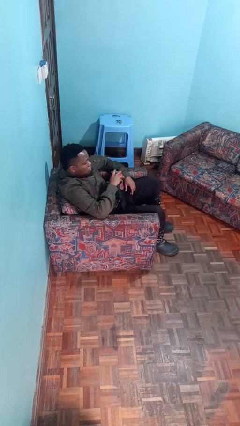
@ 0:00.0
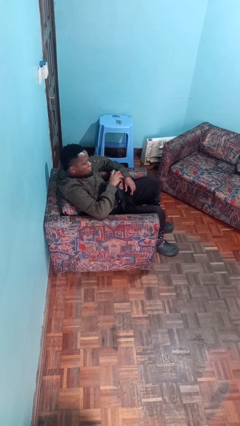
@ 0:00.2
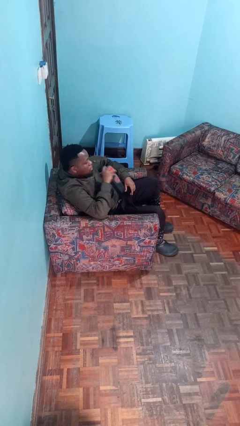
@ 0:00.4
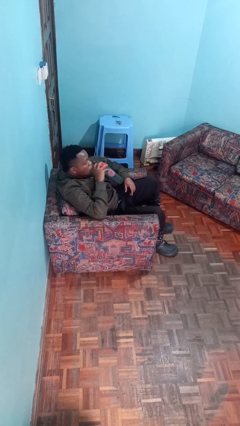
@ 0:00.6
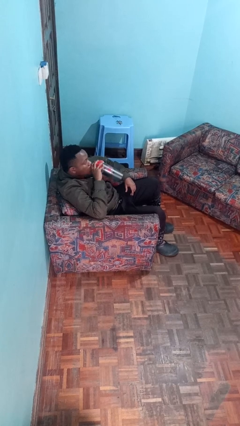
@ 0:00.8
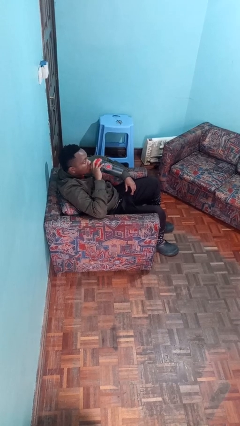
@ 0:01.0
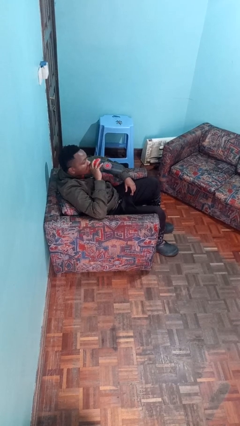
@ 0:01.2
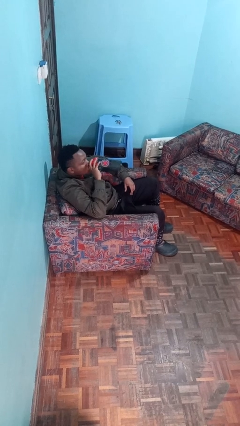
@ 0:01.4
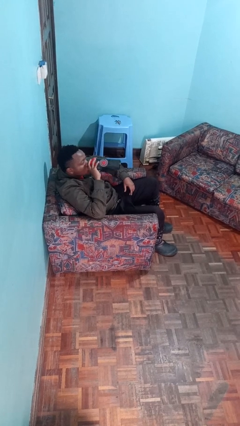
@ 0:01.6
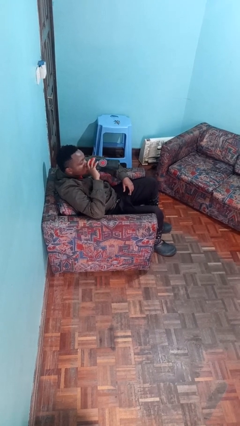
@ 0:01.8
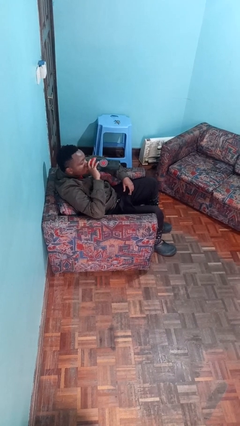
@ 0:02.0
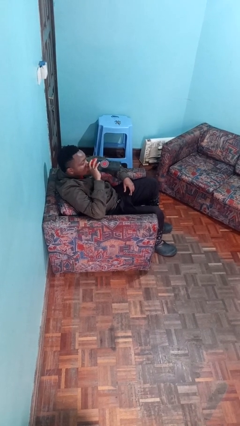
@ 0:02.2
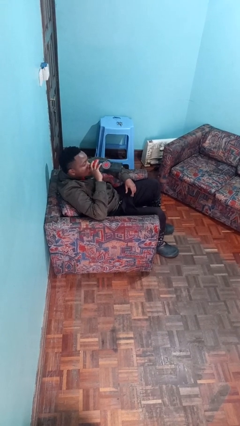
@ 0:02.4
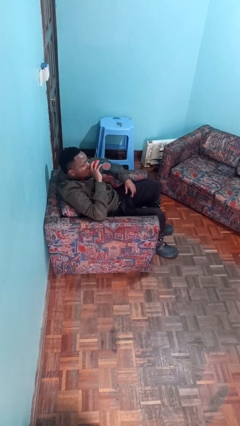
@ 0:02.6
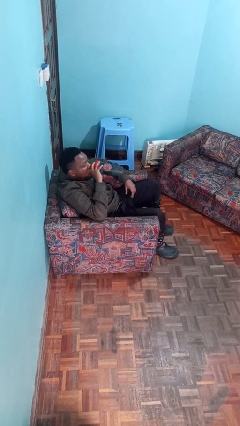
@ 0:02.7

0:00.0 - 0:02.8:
person drinks from bottle

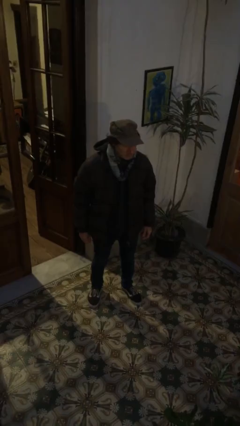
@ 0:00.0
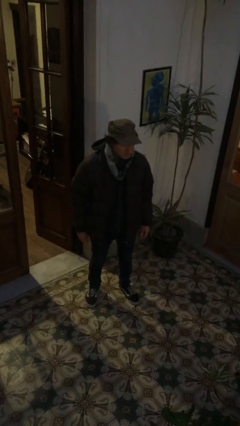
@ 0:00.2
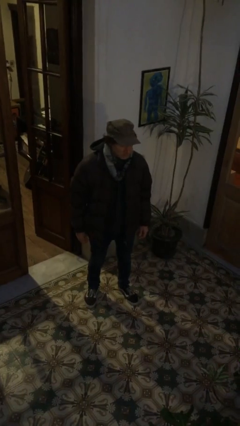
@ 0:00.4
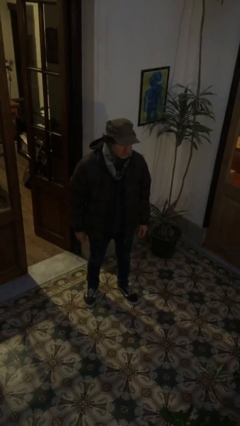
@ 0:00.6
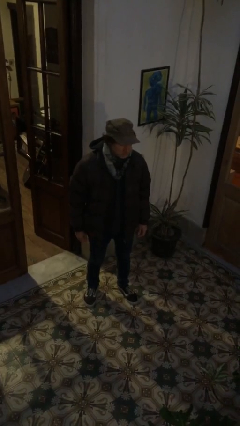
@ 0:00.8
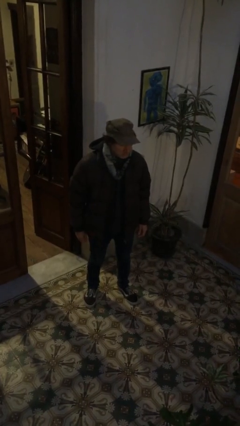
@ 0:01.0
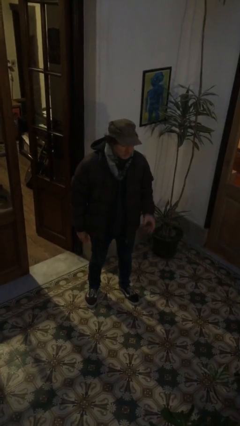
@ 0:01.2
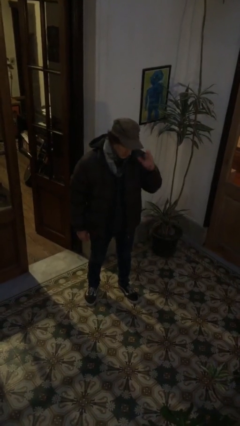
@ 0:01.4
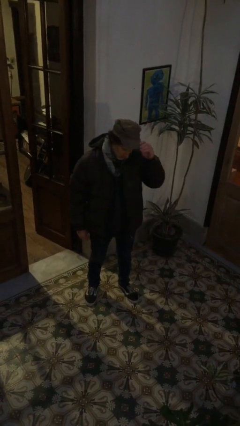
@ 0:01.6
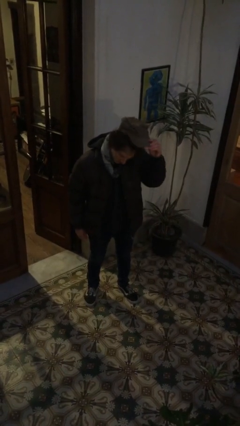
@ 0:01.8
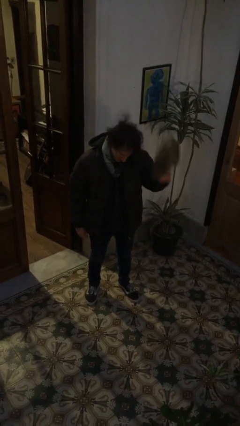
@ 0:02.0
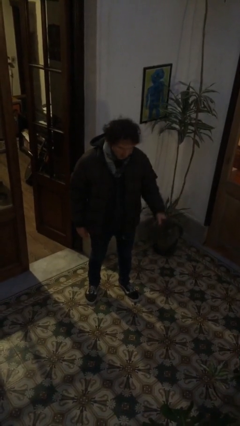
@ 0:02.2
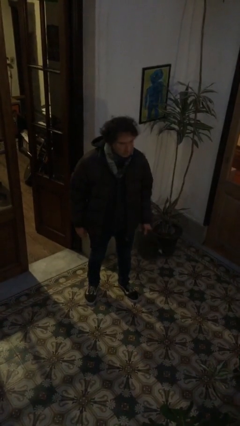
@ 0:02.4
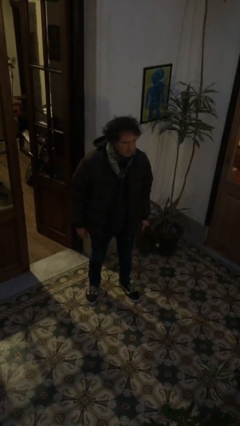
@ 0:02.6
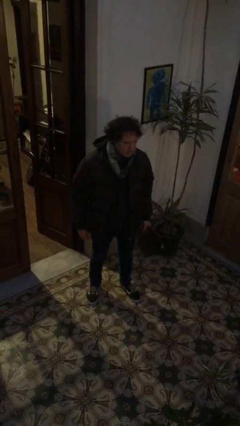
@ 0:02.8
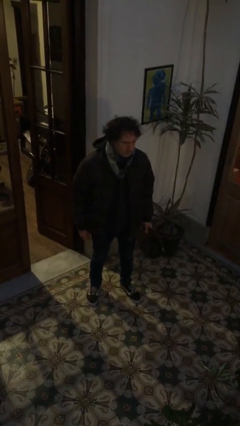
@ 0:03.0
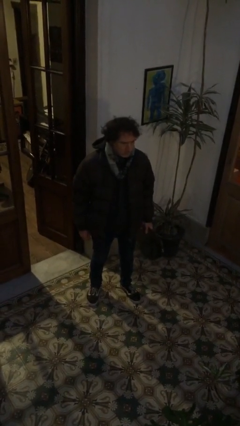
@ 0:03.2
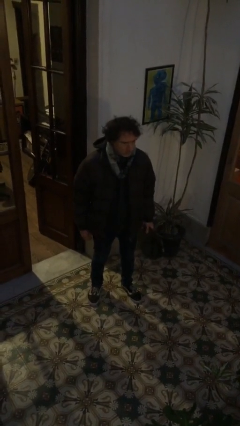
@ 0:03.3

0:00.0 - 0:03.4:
person takes off hat

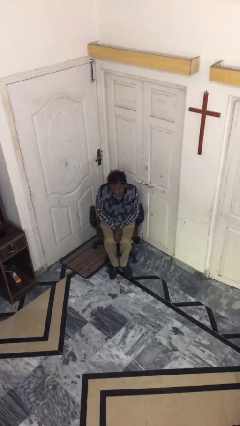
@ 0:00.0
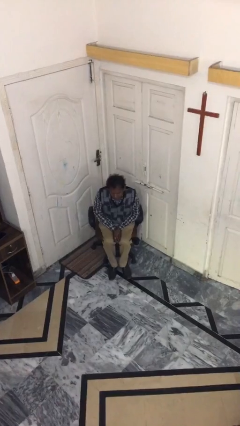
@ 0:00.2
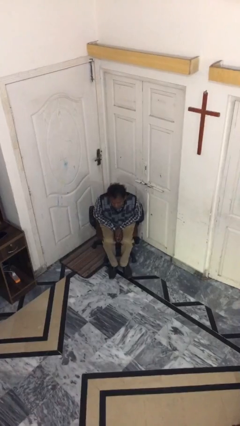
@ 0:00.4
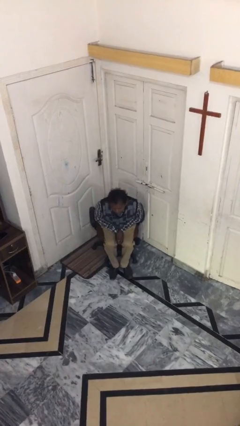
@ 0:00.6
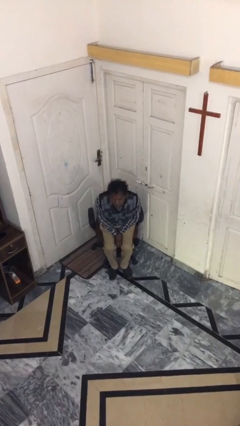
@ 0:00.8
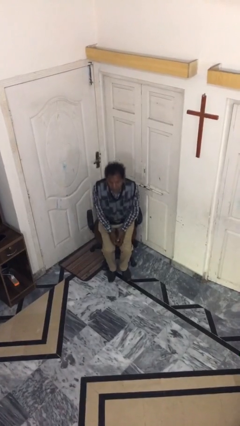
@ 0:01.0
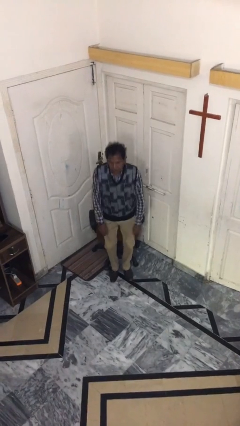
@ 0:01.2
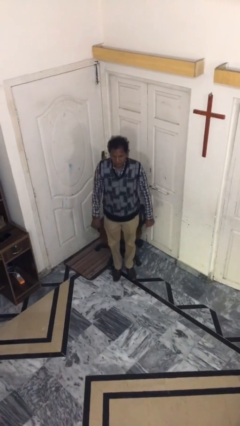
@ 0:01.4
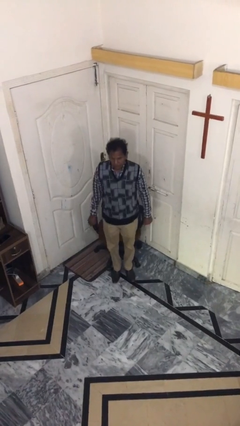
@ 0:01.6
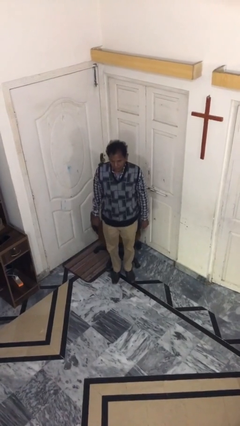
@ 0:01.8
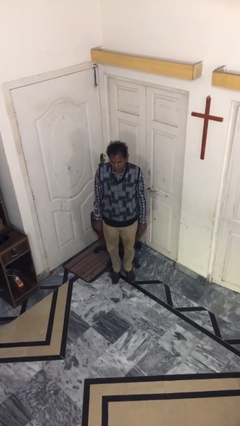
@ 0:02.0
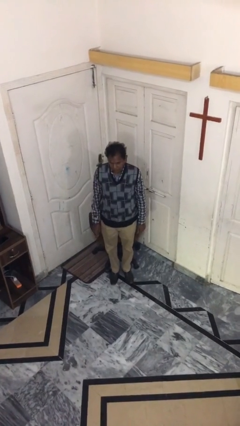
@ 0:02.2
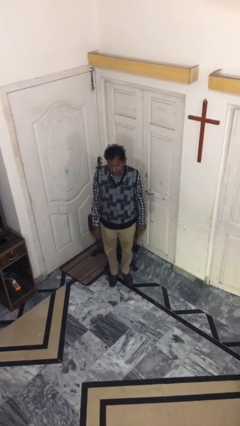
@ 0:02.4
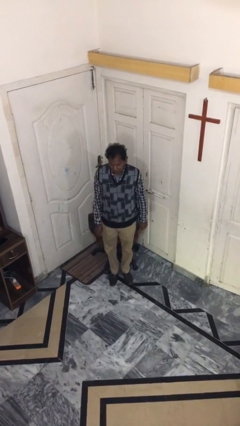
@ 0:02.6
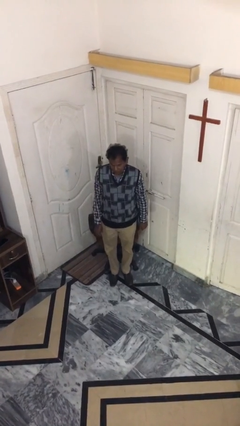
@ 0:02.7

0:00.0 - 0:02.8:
person stands up

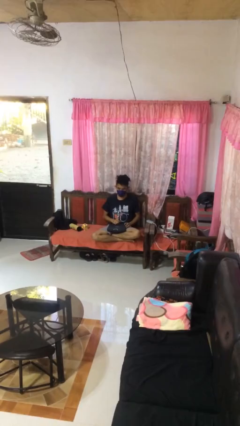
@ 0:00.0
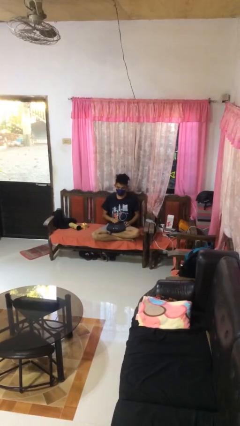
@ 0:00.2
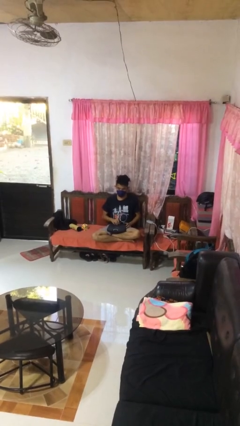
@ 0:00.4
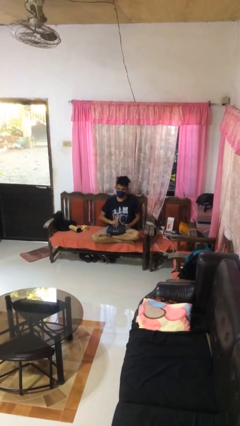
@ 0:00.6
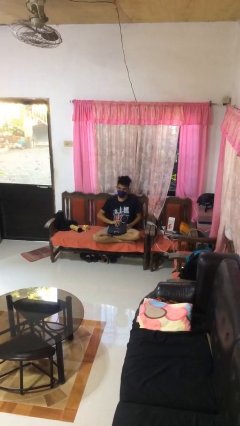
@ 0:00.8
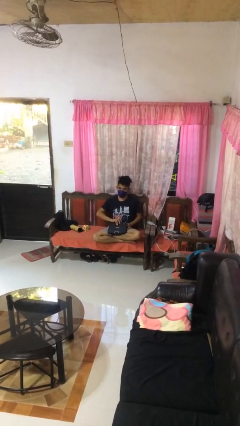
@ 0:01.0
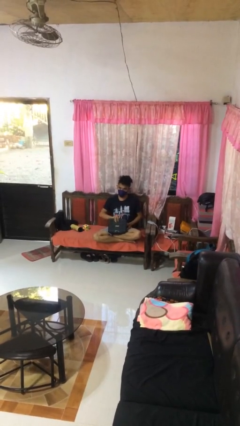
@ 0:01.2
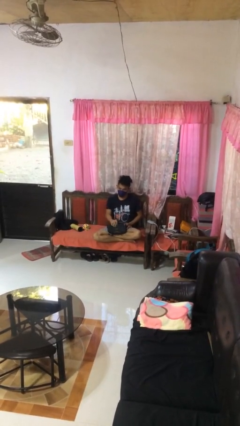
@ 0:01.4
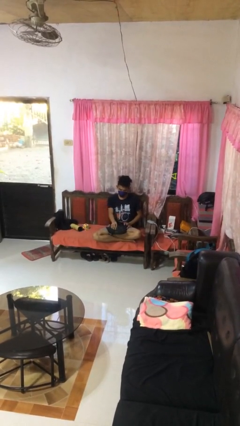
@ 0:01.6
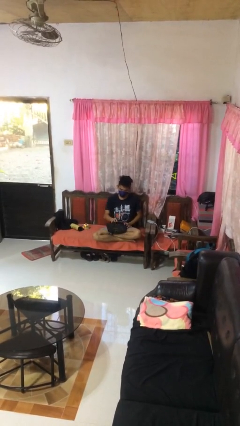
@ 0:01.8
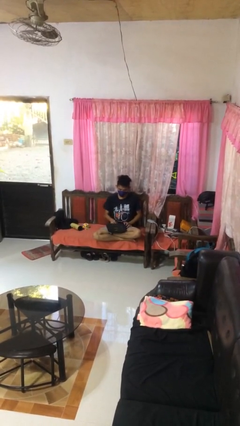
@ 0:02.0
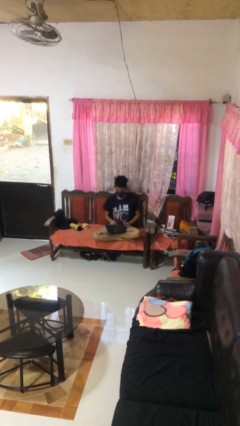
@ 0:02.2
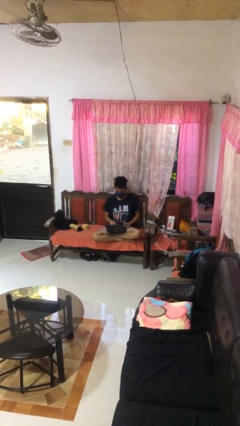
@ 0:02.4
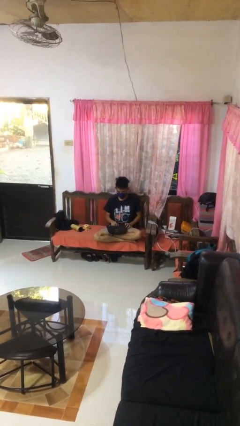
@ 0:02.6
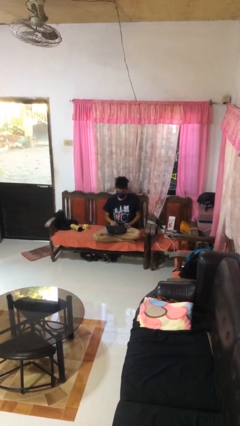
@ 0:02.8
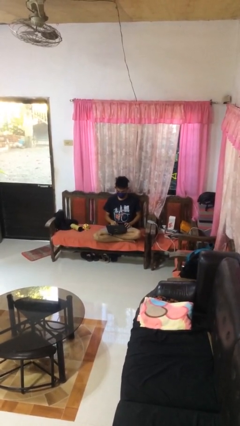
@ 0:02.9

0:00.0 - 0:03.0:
person opens laptop

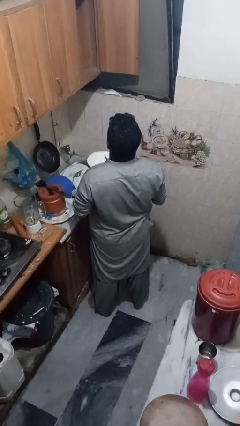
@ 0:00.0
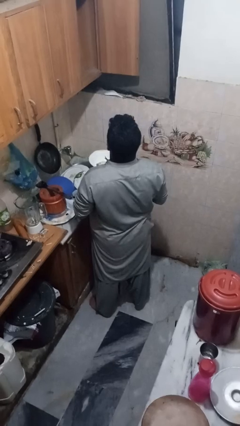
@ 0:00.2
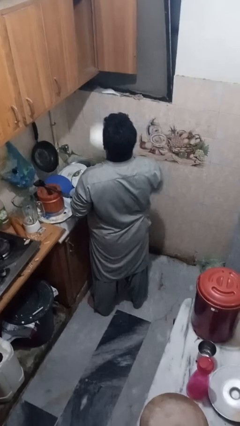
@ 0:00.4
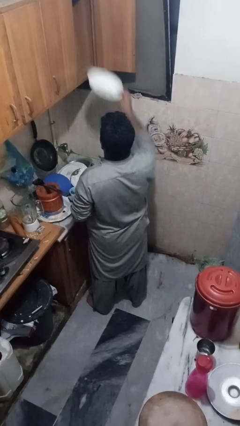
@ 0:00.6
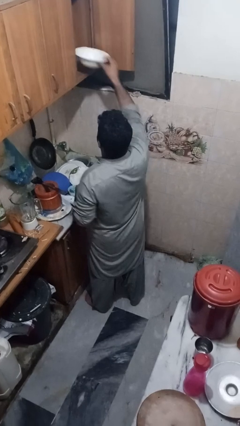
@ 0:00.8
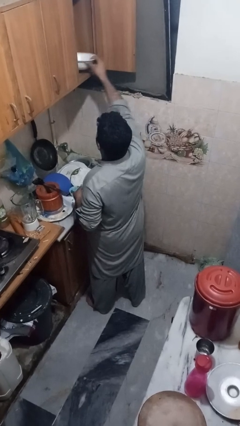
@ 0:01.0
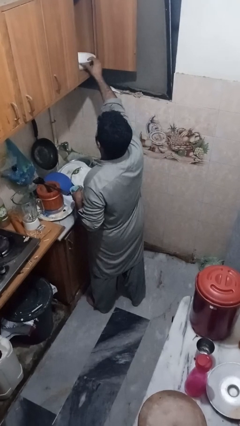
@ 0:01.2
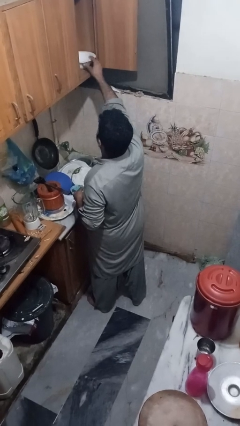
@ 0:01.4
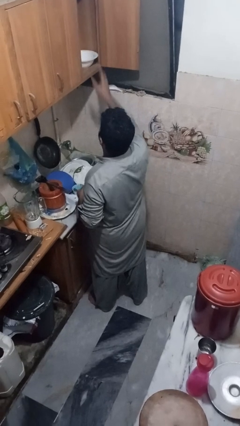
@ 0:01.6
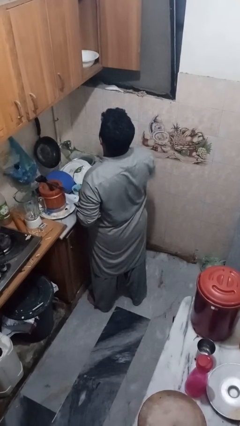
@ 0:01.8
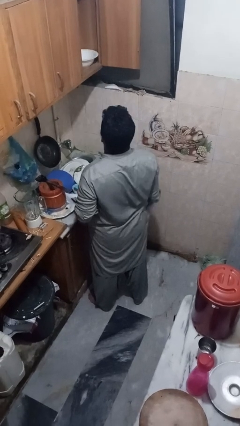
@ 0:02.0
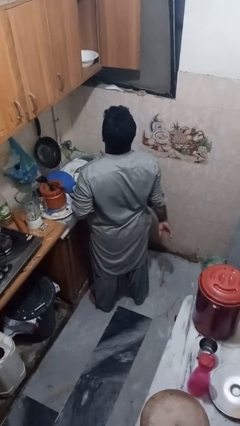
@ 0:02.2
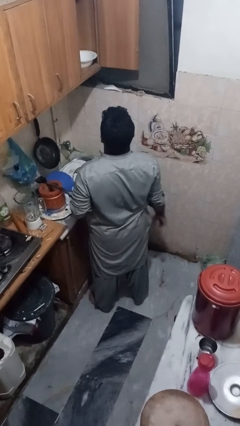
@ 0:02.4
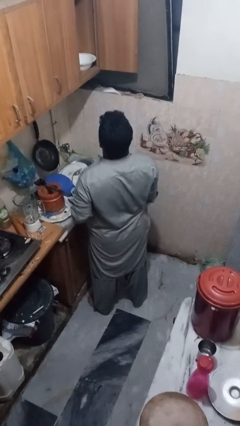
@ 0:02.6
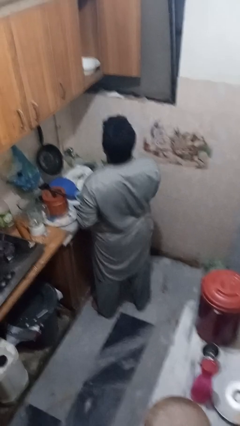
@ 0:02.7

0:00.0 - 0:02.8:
person puts object in cabinet

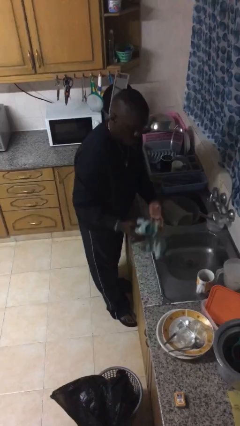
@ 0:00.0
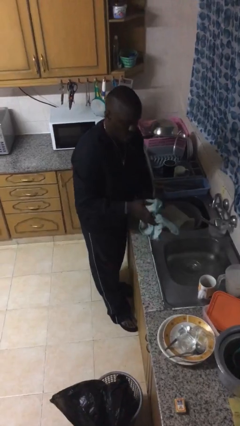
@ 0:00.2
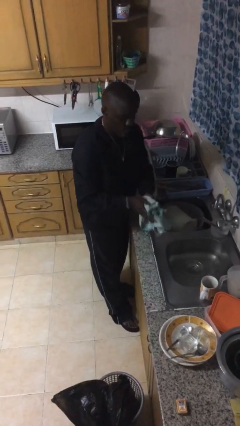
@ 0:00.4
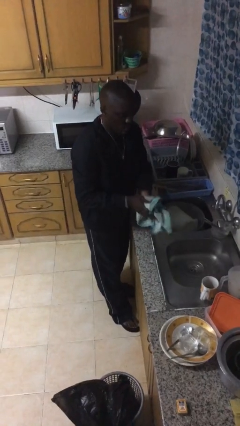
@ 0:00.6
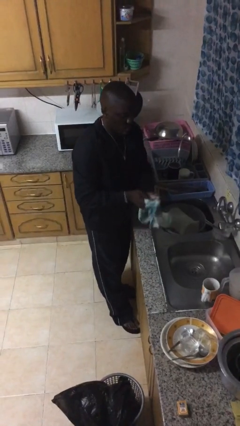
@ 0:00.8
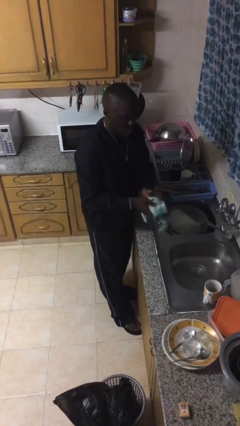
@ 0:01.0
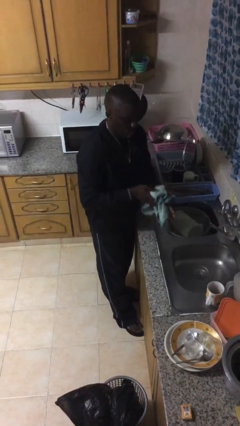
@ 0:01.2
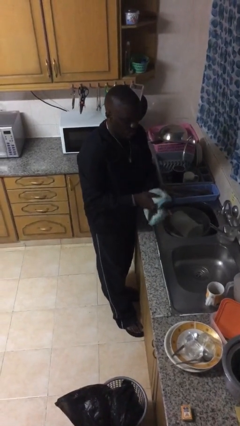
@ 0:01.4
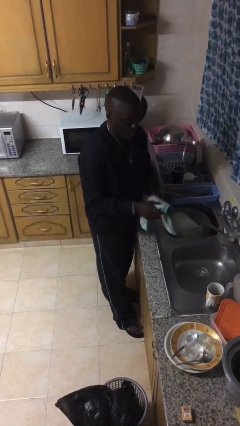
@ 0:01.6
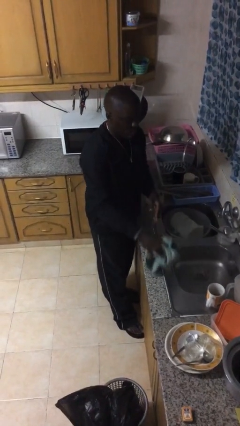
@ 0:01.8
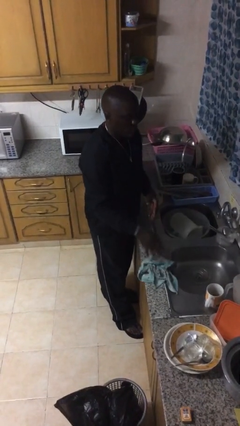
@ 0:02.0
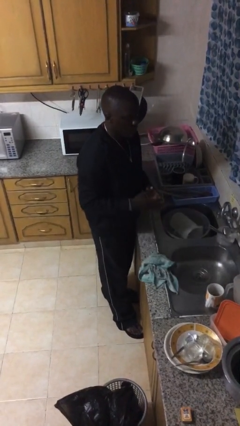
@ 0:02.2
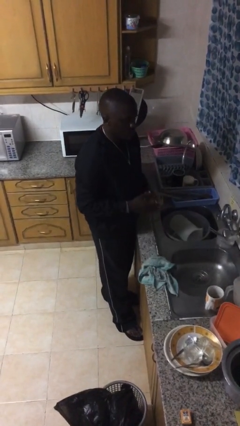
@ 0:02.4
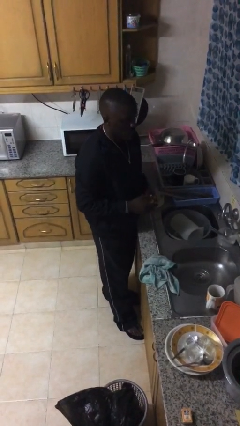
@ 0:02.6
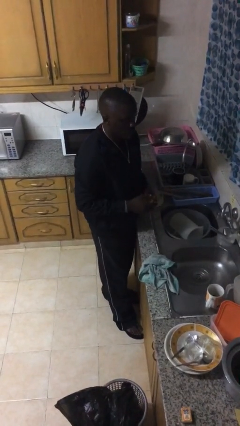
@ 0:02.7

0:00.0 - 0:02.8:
person dries hands with towel
